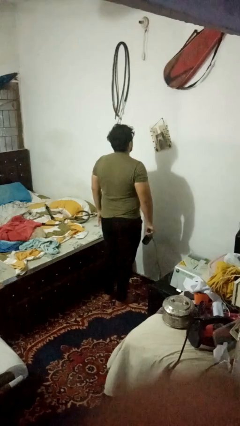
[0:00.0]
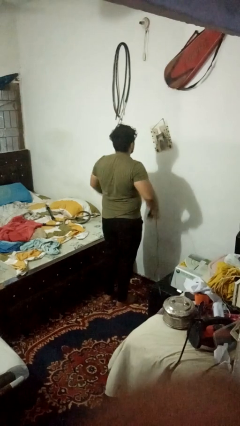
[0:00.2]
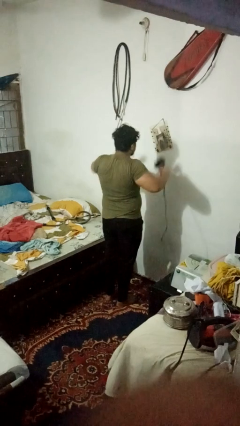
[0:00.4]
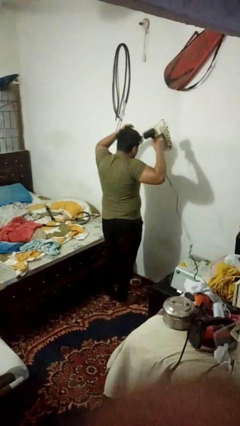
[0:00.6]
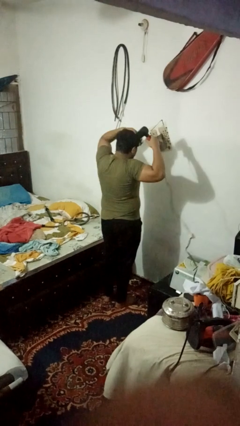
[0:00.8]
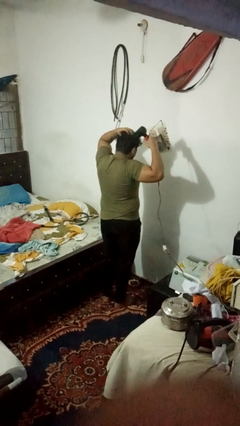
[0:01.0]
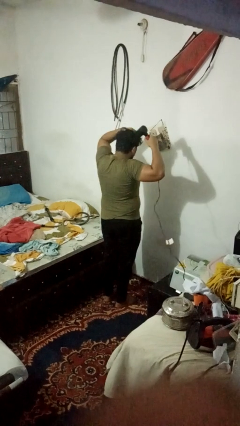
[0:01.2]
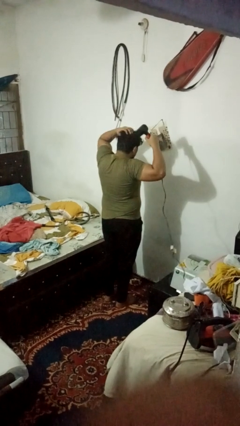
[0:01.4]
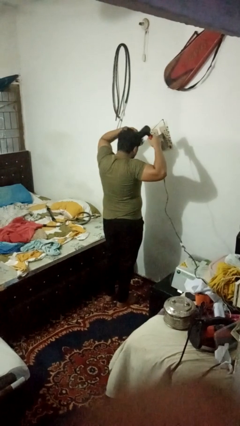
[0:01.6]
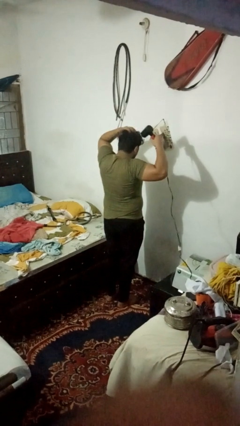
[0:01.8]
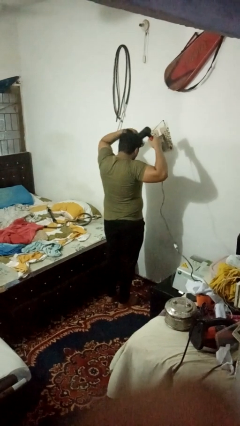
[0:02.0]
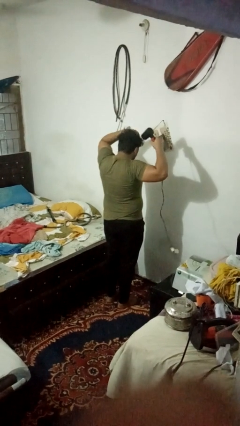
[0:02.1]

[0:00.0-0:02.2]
person dries hair with hairdryer

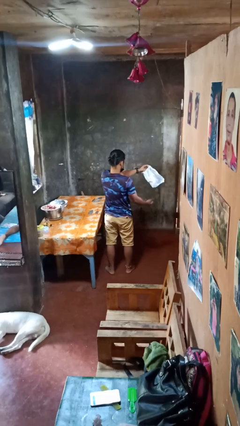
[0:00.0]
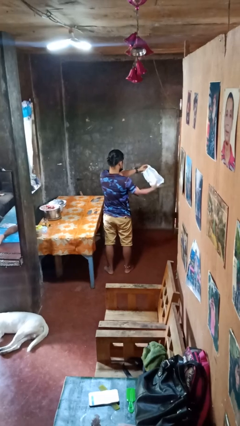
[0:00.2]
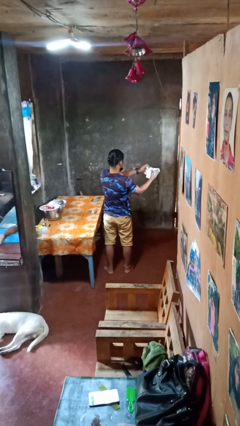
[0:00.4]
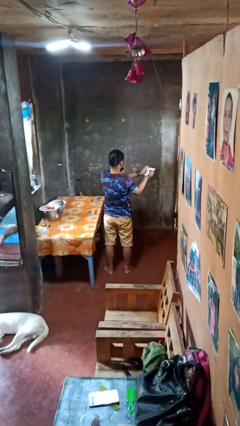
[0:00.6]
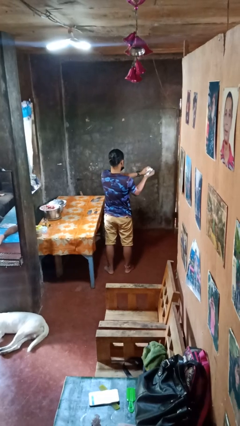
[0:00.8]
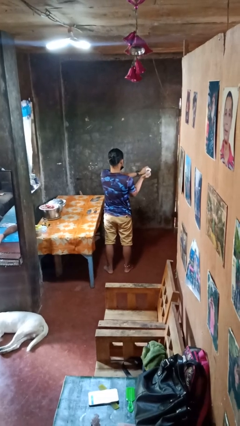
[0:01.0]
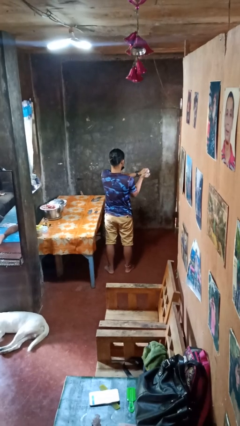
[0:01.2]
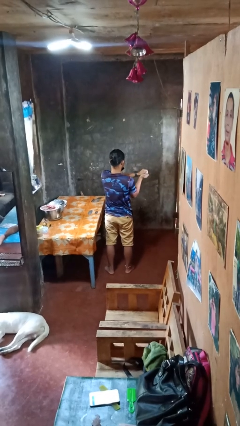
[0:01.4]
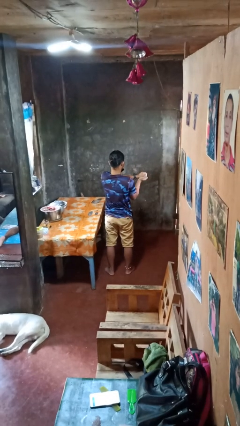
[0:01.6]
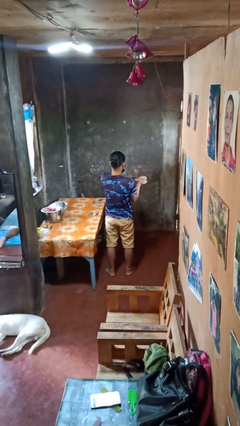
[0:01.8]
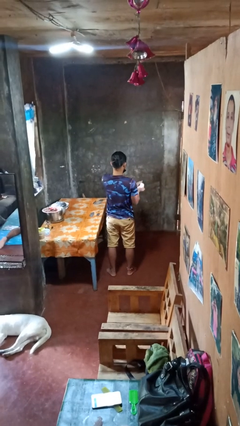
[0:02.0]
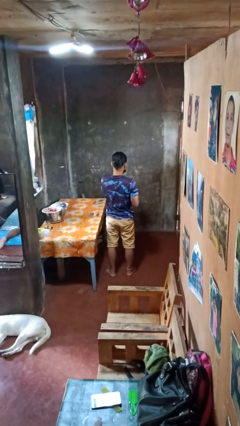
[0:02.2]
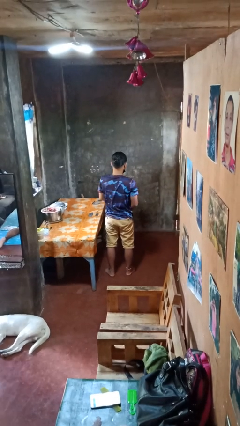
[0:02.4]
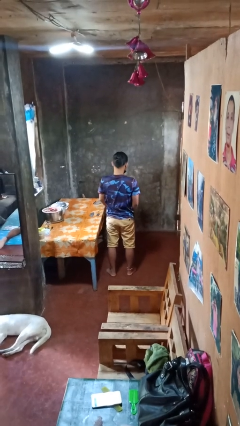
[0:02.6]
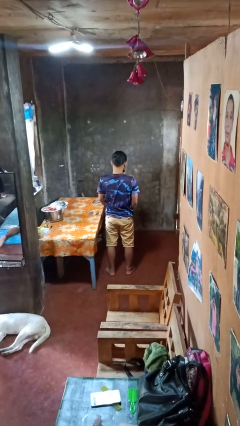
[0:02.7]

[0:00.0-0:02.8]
person crumples paper

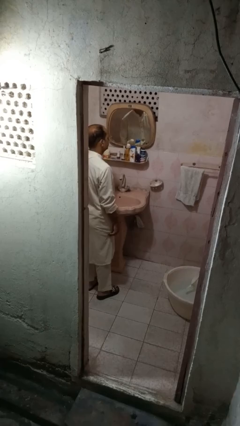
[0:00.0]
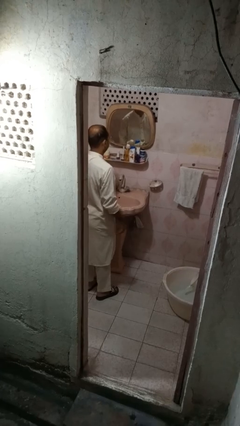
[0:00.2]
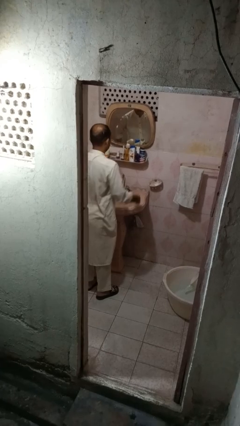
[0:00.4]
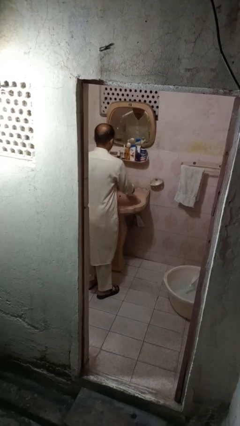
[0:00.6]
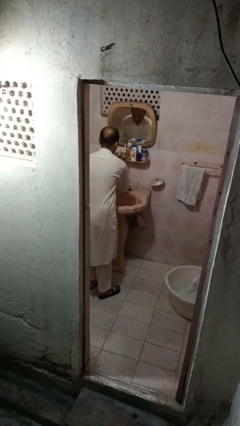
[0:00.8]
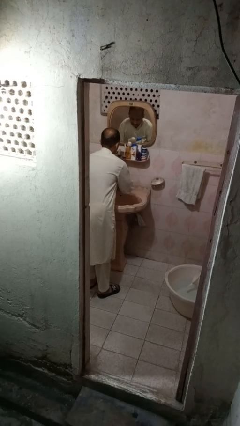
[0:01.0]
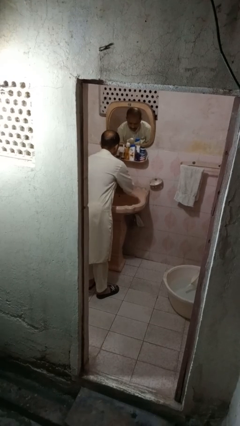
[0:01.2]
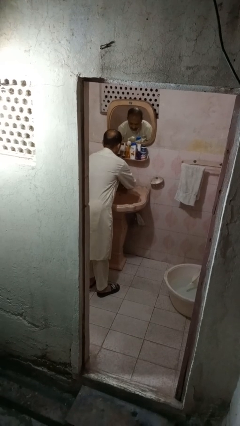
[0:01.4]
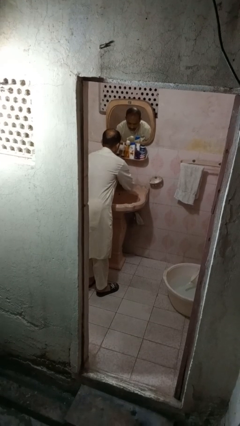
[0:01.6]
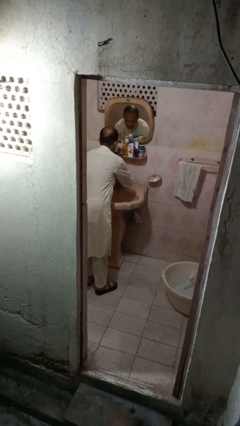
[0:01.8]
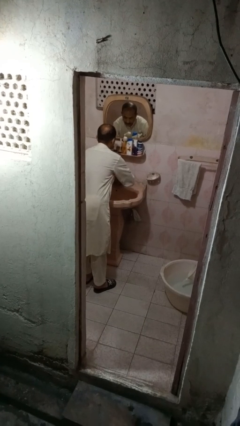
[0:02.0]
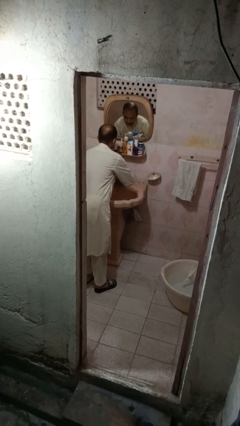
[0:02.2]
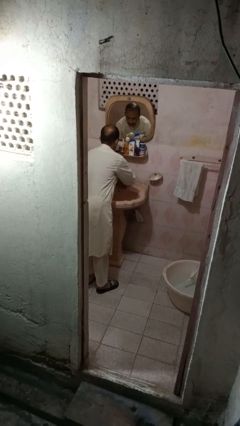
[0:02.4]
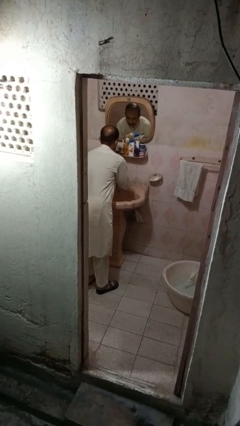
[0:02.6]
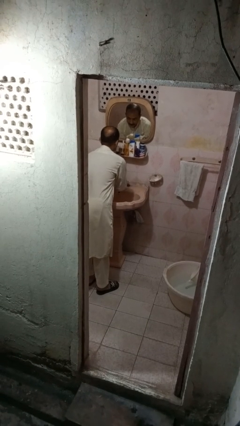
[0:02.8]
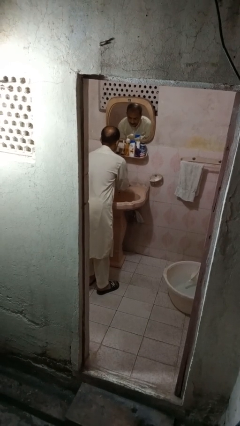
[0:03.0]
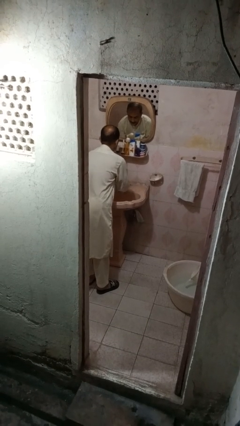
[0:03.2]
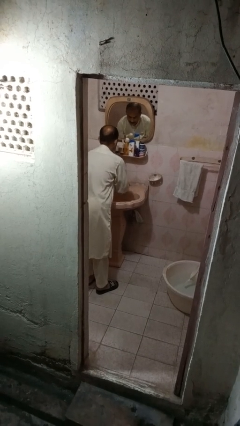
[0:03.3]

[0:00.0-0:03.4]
person washes hands

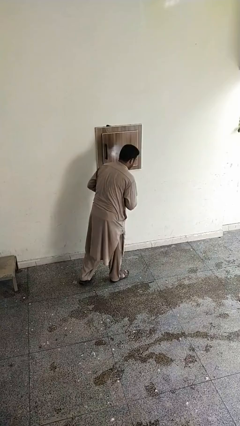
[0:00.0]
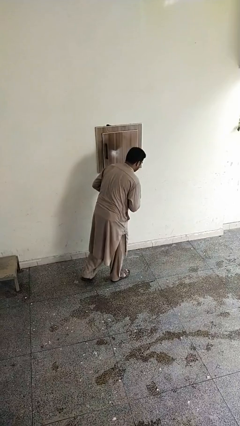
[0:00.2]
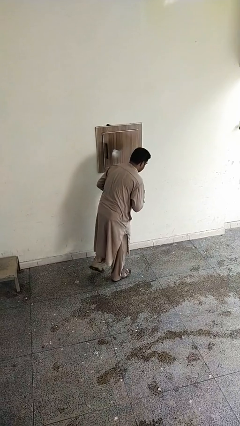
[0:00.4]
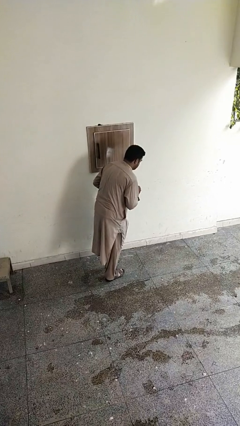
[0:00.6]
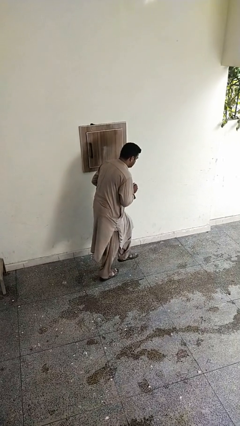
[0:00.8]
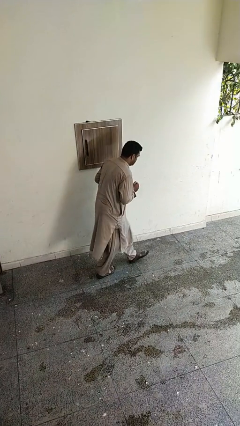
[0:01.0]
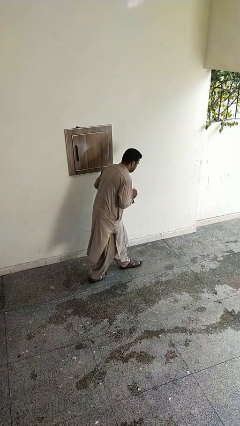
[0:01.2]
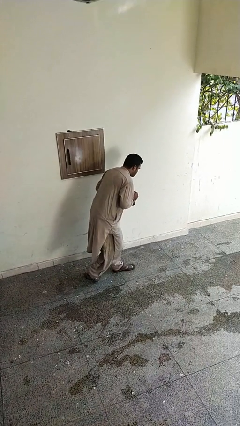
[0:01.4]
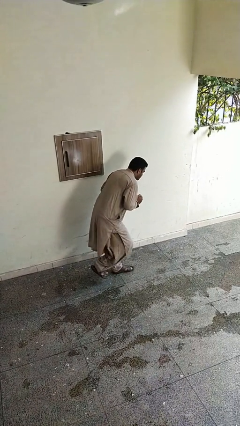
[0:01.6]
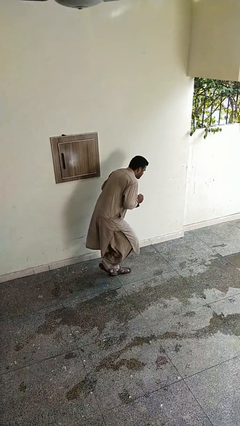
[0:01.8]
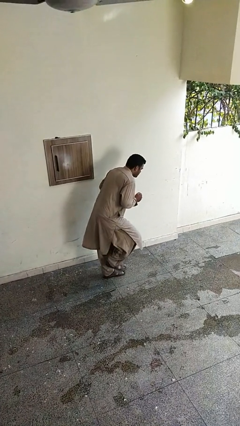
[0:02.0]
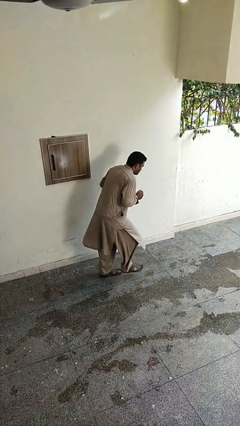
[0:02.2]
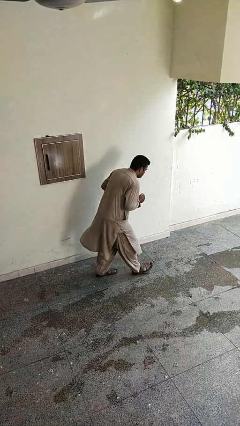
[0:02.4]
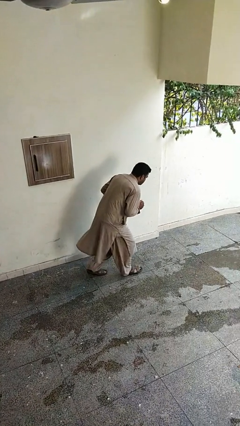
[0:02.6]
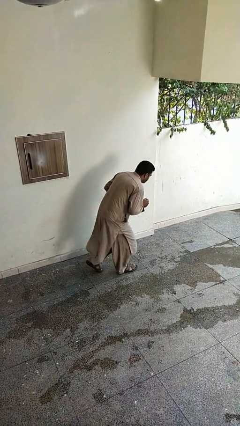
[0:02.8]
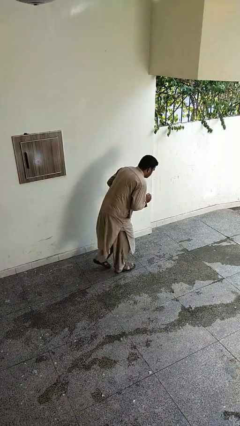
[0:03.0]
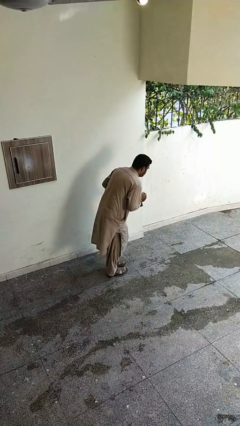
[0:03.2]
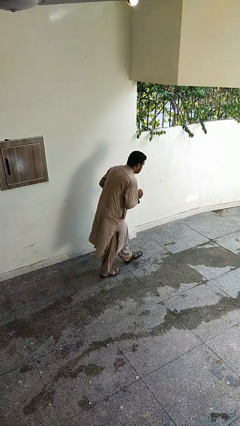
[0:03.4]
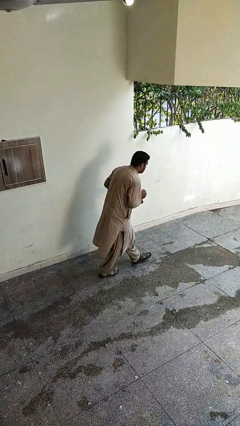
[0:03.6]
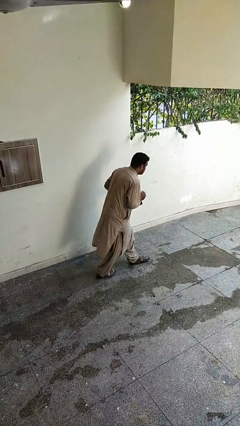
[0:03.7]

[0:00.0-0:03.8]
person walks tiptoe

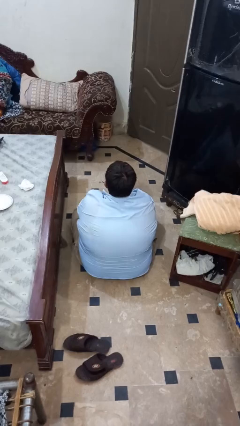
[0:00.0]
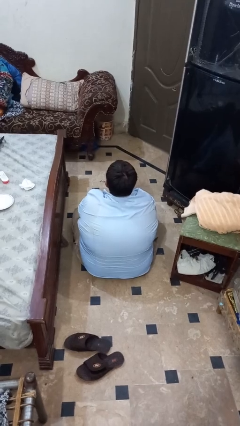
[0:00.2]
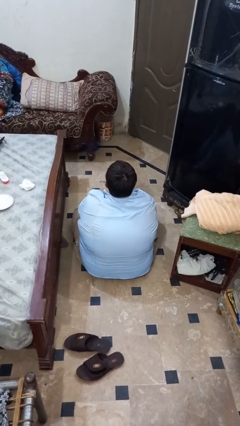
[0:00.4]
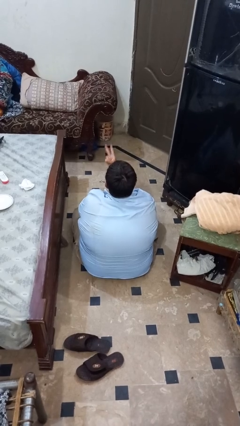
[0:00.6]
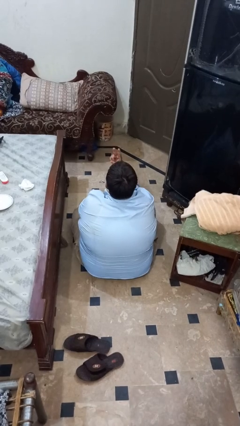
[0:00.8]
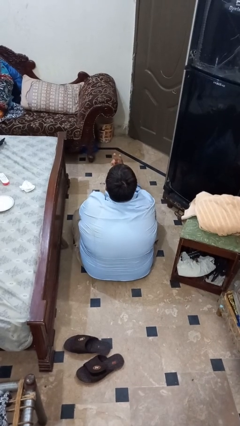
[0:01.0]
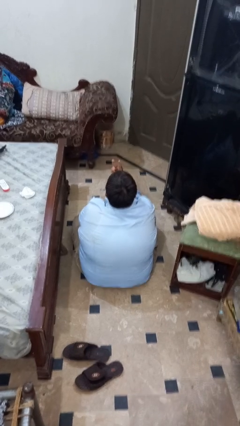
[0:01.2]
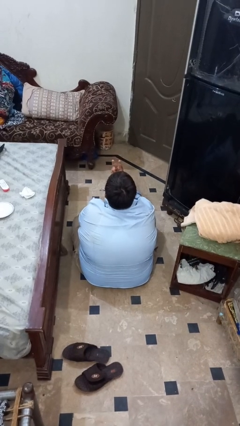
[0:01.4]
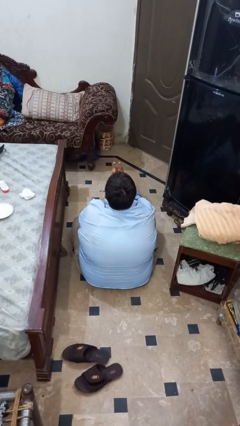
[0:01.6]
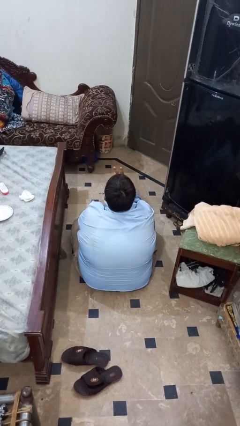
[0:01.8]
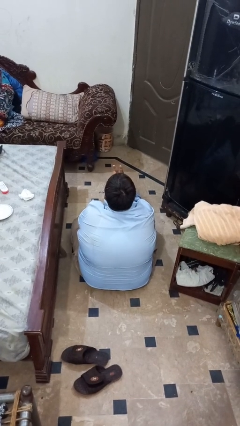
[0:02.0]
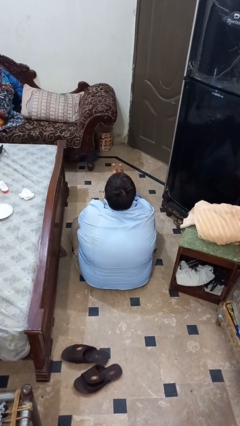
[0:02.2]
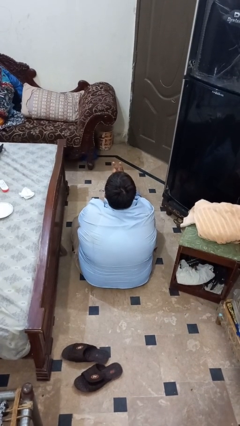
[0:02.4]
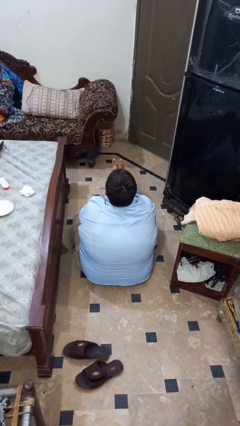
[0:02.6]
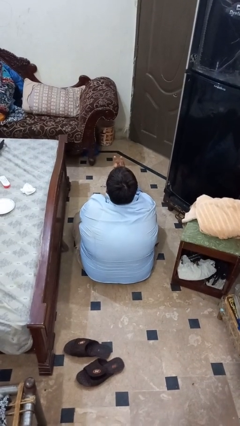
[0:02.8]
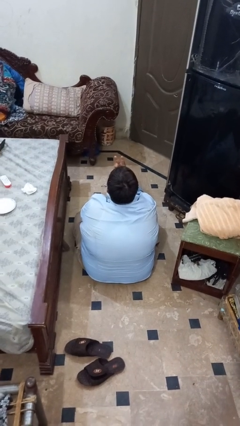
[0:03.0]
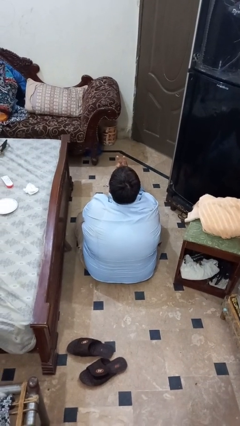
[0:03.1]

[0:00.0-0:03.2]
person gestures watch closely

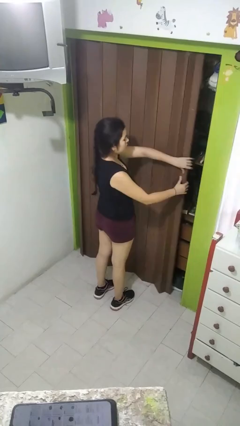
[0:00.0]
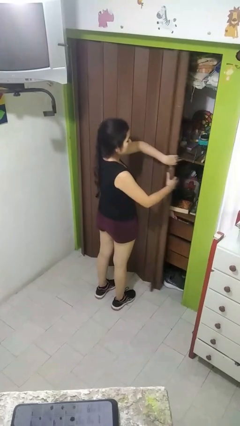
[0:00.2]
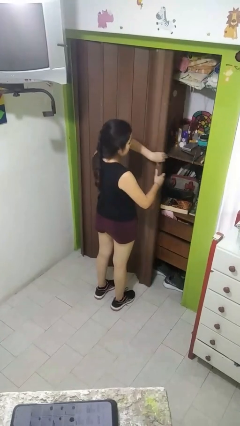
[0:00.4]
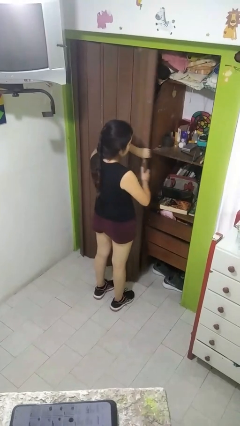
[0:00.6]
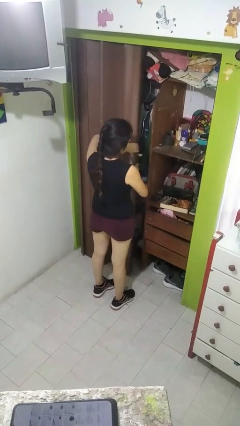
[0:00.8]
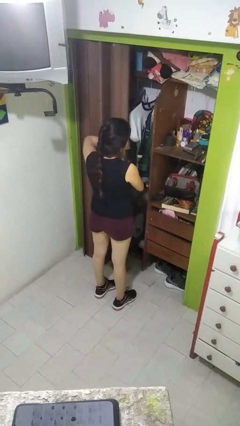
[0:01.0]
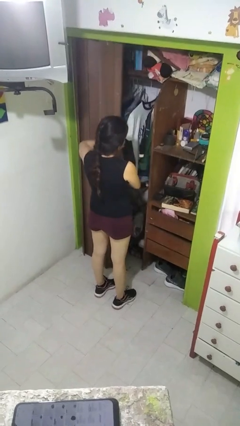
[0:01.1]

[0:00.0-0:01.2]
person opens closet door

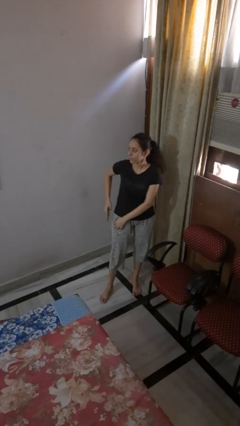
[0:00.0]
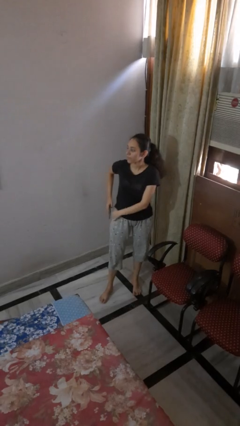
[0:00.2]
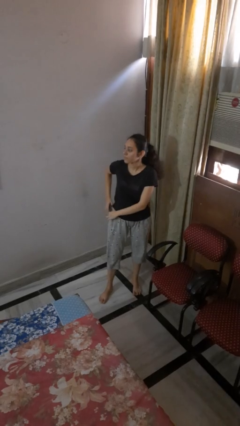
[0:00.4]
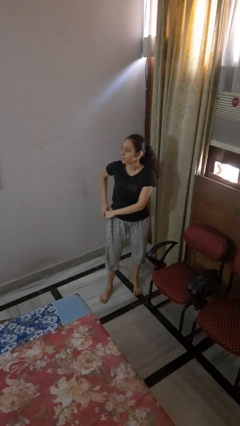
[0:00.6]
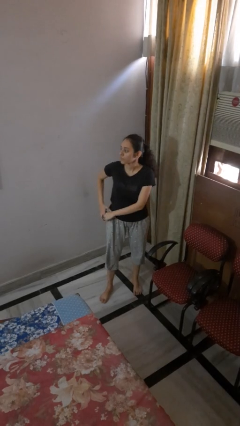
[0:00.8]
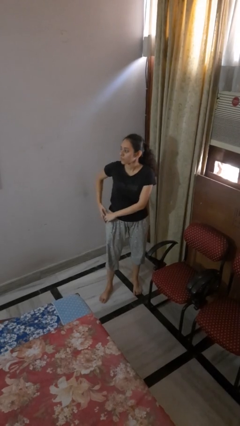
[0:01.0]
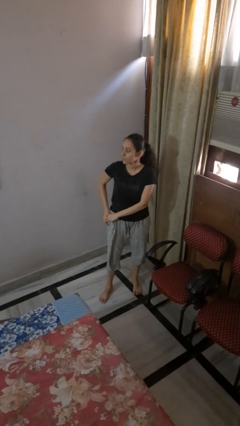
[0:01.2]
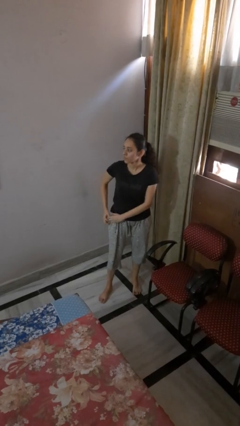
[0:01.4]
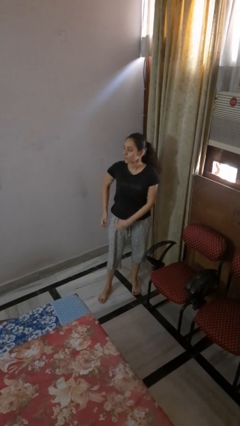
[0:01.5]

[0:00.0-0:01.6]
person puts phone into pocket
